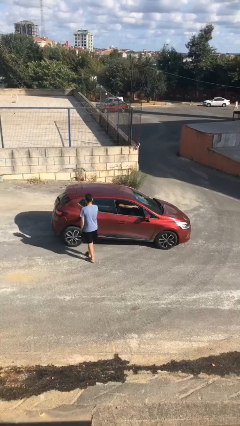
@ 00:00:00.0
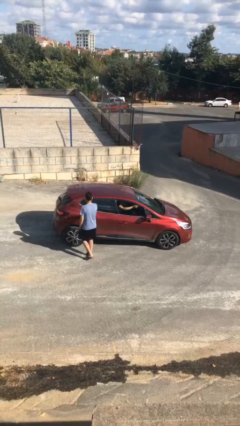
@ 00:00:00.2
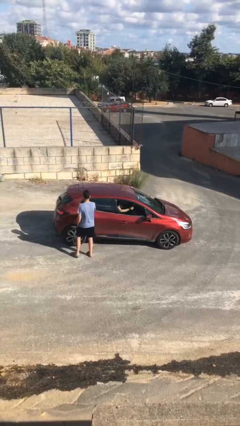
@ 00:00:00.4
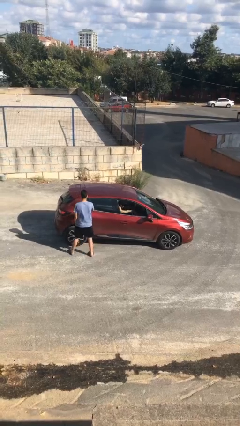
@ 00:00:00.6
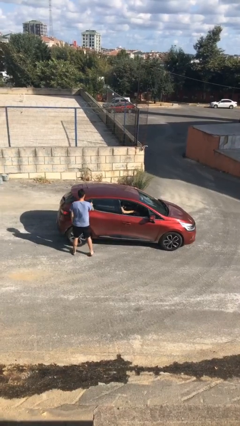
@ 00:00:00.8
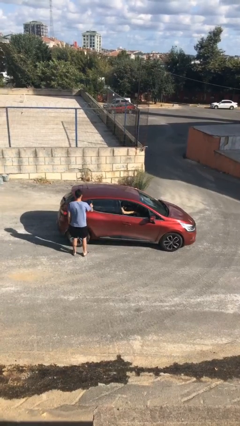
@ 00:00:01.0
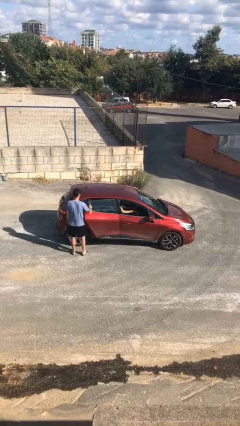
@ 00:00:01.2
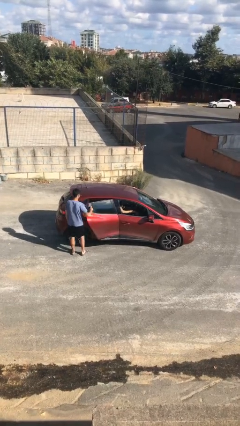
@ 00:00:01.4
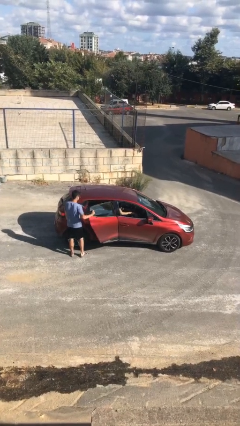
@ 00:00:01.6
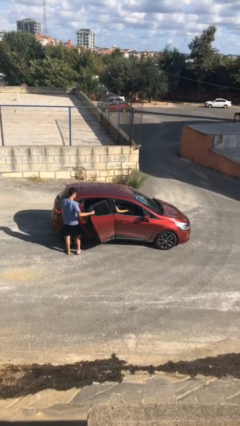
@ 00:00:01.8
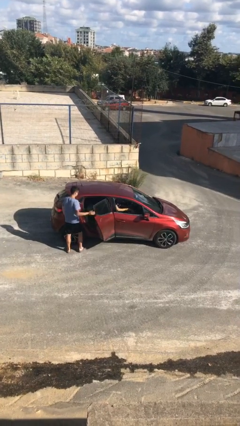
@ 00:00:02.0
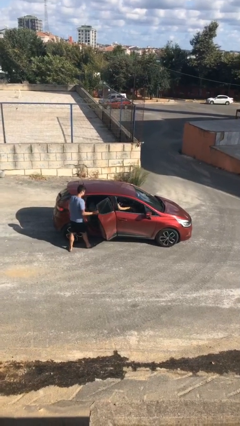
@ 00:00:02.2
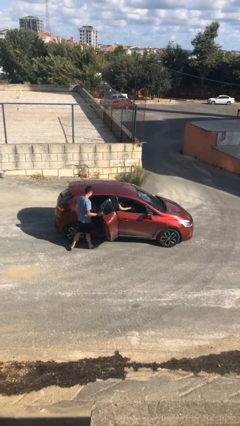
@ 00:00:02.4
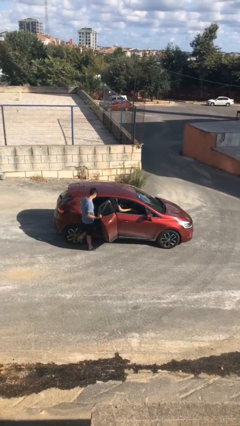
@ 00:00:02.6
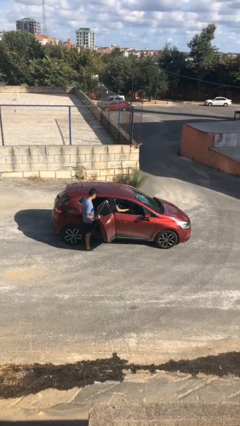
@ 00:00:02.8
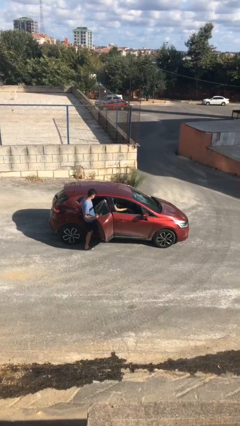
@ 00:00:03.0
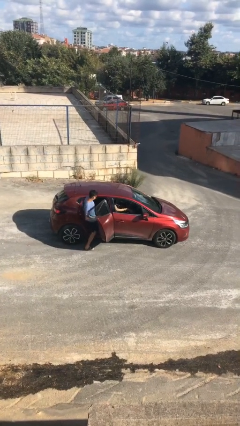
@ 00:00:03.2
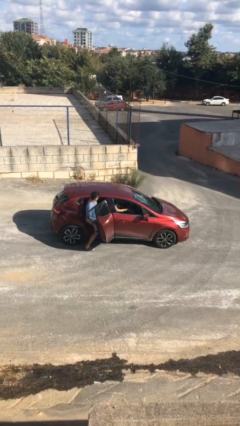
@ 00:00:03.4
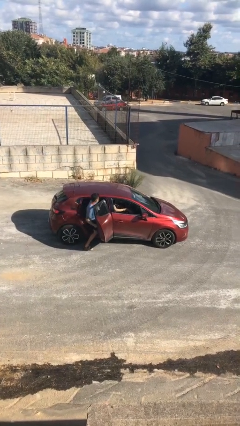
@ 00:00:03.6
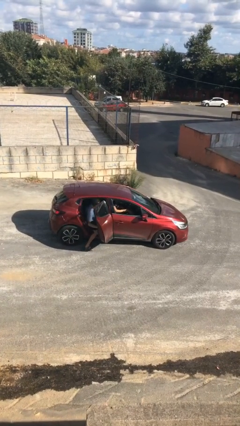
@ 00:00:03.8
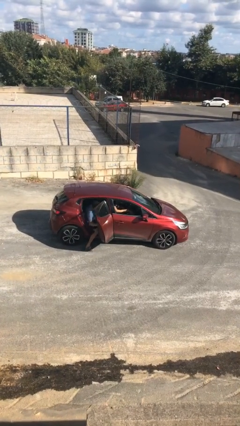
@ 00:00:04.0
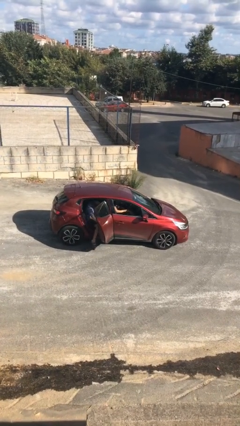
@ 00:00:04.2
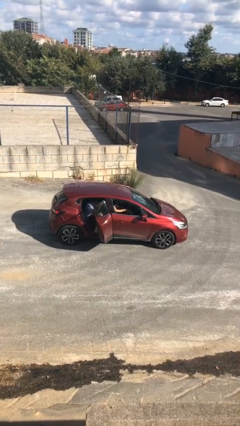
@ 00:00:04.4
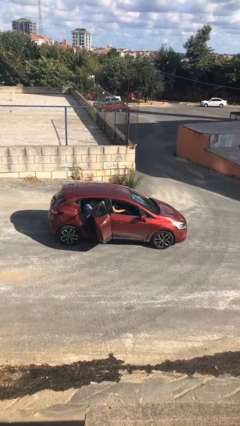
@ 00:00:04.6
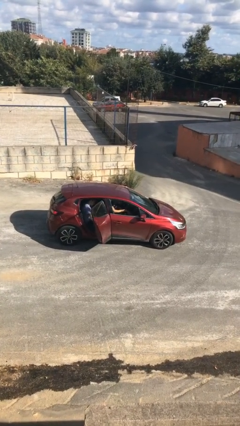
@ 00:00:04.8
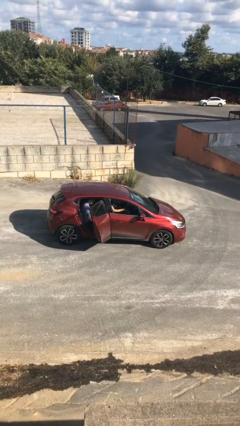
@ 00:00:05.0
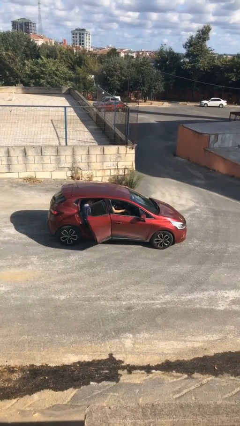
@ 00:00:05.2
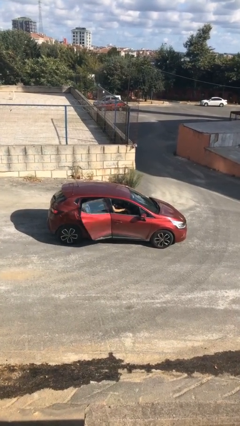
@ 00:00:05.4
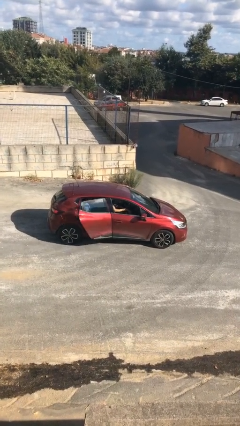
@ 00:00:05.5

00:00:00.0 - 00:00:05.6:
car picks up person

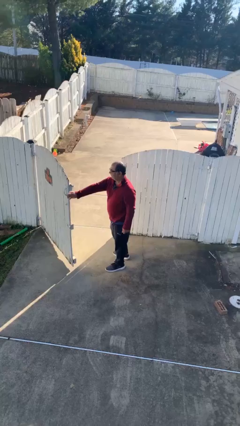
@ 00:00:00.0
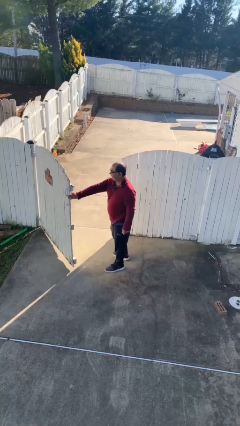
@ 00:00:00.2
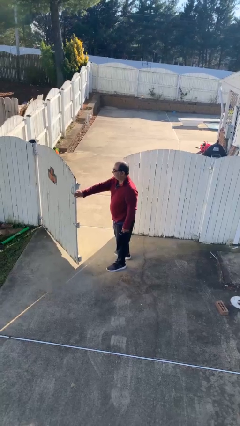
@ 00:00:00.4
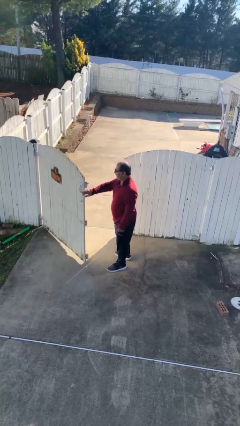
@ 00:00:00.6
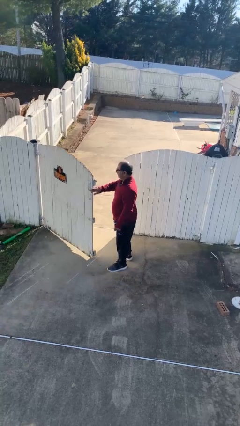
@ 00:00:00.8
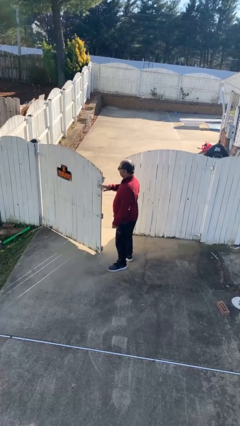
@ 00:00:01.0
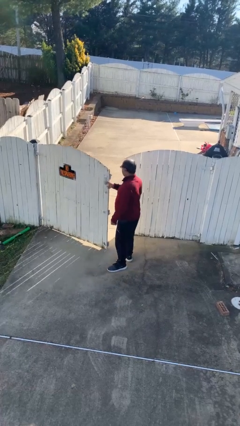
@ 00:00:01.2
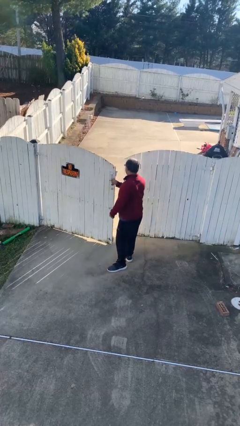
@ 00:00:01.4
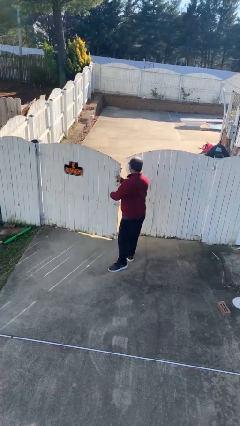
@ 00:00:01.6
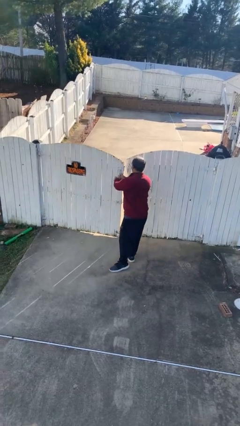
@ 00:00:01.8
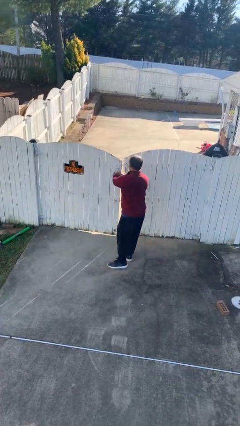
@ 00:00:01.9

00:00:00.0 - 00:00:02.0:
person closes facility door

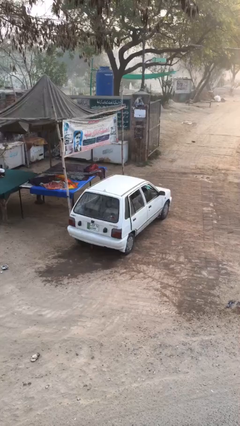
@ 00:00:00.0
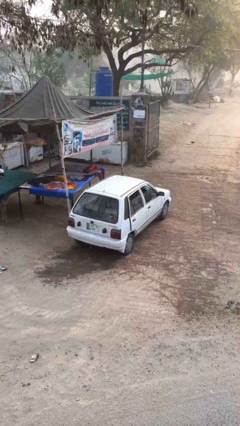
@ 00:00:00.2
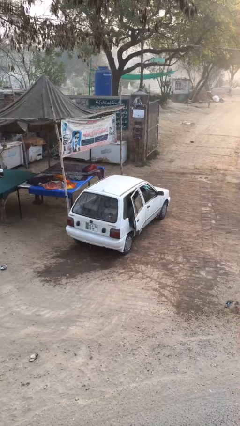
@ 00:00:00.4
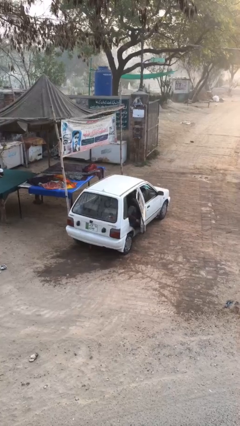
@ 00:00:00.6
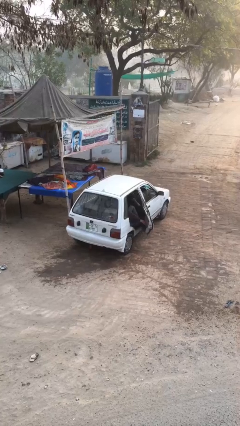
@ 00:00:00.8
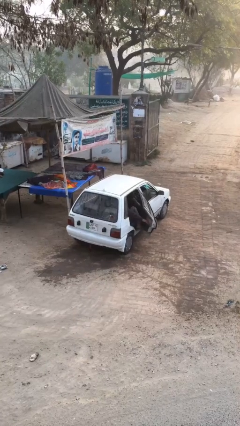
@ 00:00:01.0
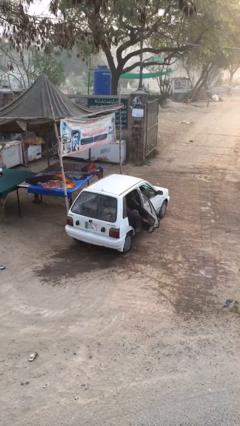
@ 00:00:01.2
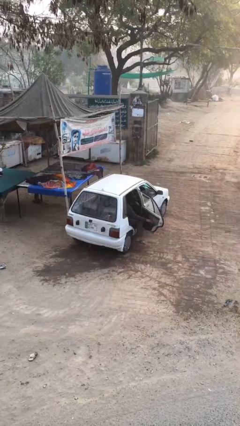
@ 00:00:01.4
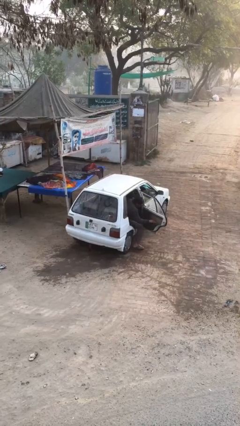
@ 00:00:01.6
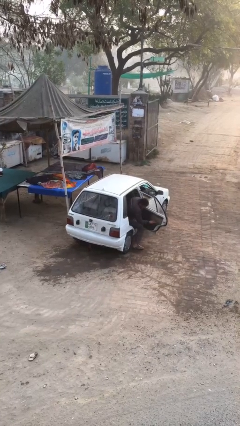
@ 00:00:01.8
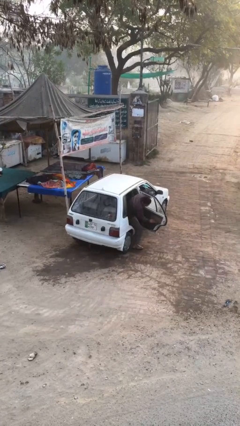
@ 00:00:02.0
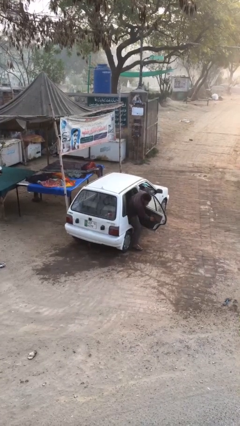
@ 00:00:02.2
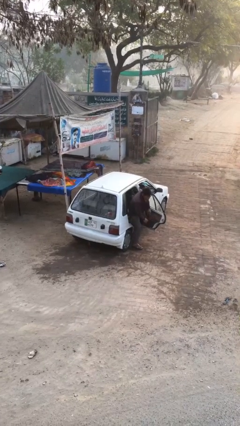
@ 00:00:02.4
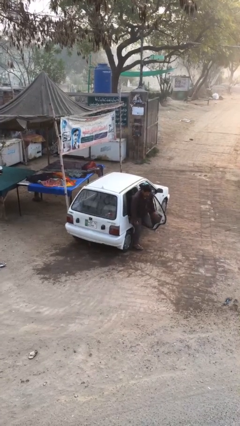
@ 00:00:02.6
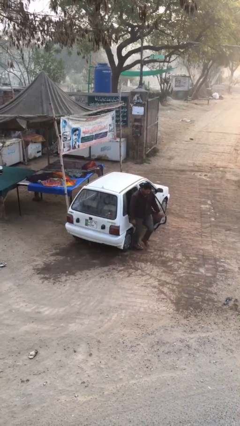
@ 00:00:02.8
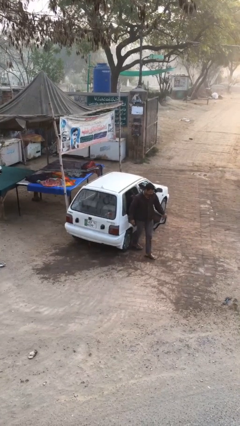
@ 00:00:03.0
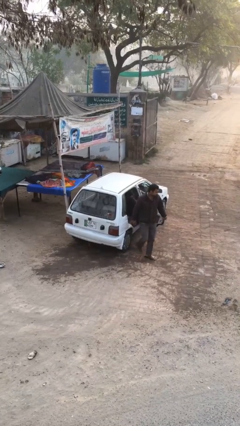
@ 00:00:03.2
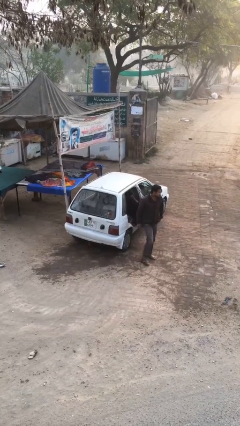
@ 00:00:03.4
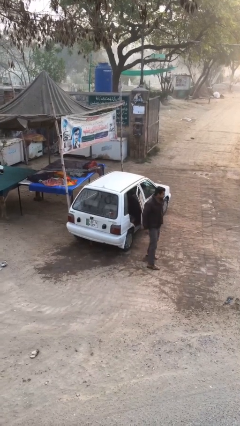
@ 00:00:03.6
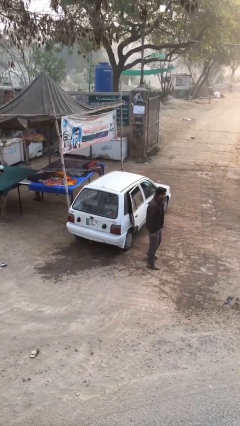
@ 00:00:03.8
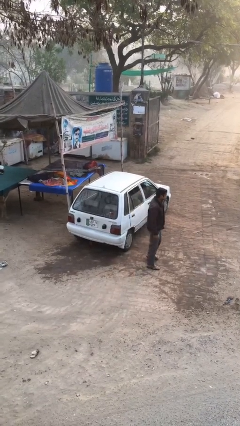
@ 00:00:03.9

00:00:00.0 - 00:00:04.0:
car drops off person

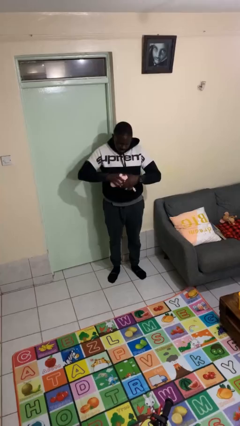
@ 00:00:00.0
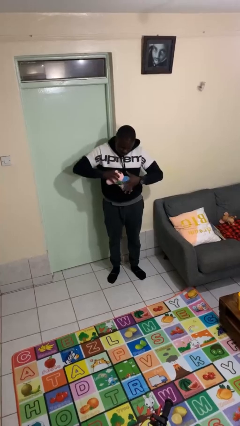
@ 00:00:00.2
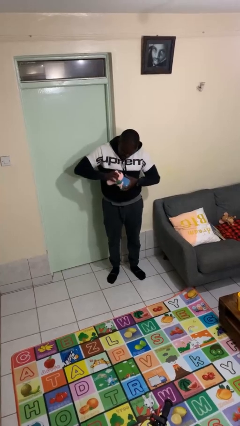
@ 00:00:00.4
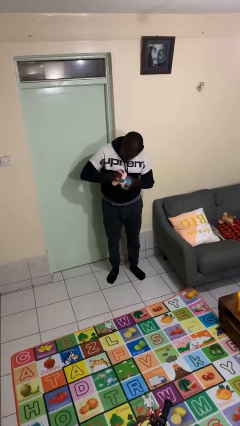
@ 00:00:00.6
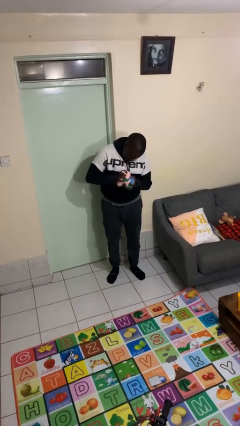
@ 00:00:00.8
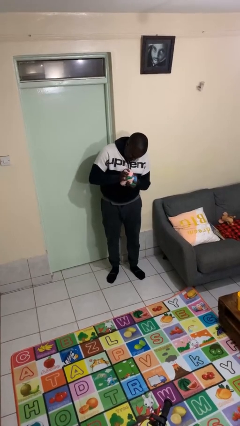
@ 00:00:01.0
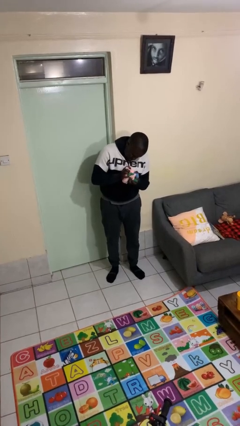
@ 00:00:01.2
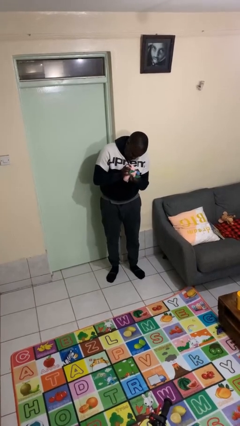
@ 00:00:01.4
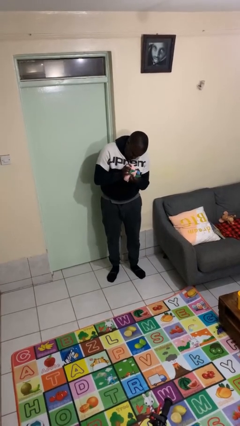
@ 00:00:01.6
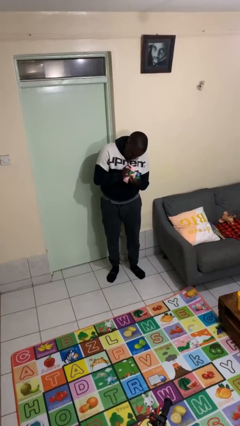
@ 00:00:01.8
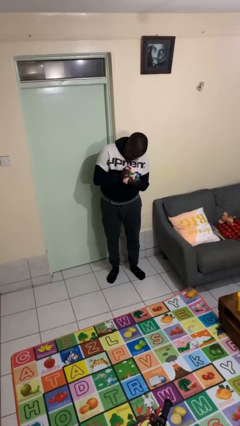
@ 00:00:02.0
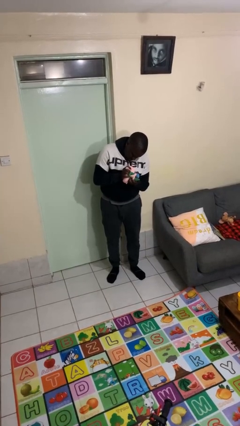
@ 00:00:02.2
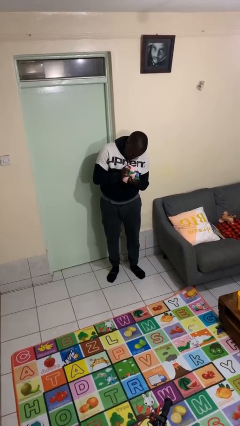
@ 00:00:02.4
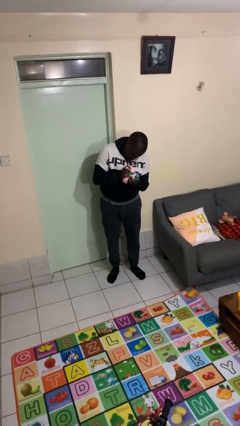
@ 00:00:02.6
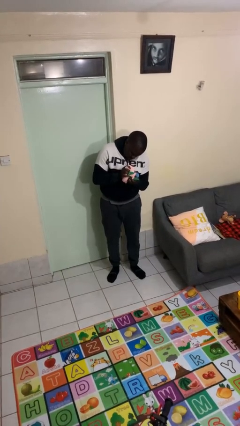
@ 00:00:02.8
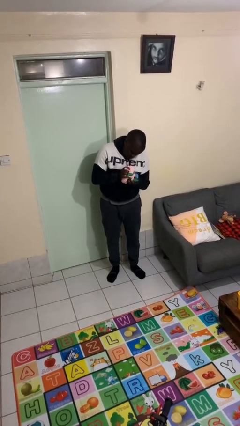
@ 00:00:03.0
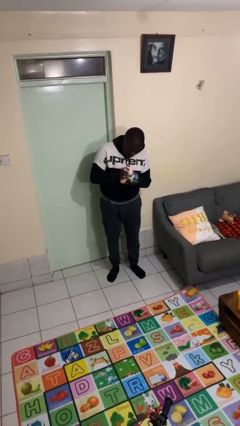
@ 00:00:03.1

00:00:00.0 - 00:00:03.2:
person squeezes object

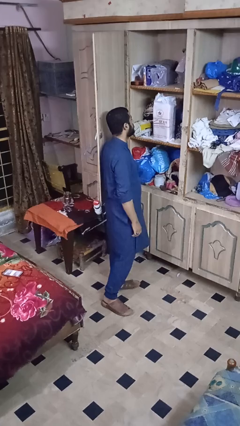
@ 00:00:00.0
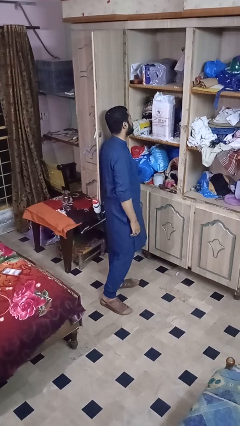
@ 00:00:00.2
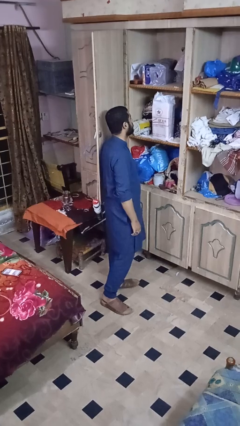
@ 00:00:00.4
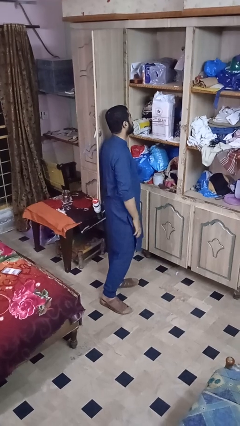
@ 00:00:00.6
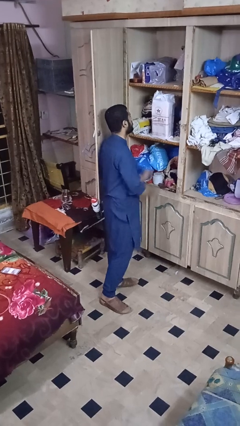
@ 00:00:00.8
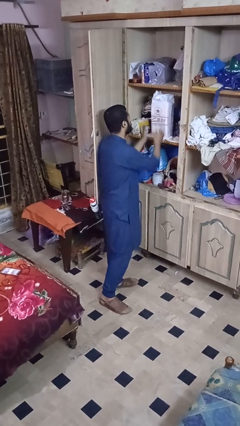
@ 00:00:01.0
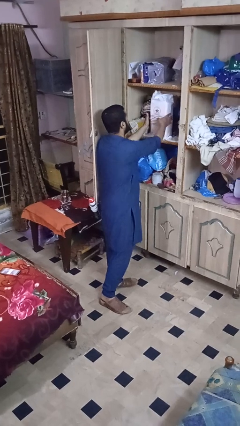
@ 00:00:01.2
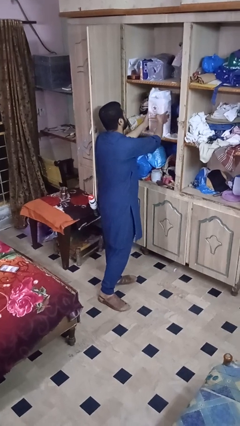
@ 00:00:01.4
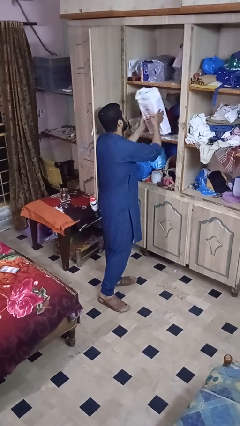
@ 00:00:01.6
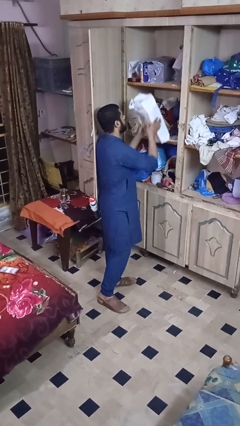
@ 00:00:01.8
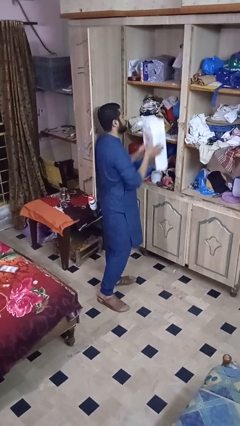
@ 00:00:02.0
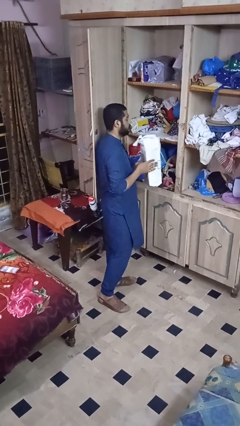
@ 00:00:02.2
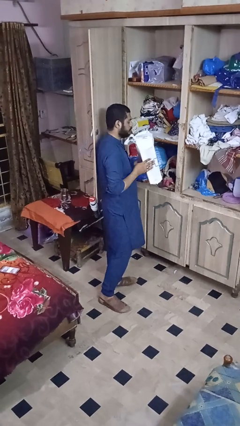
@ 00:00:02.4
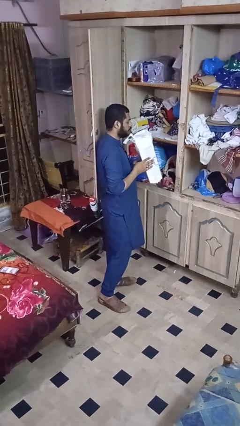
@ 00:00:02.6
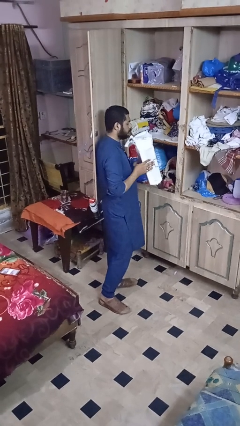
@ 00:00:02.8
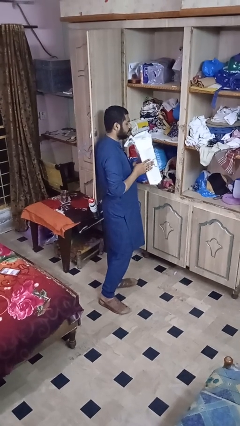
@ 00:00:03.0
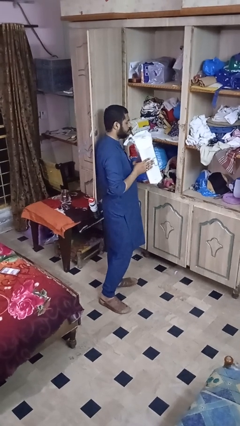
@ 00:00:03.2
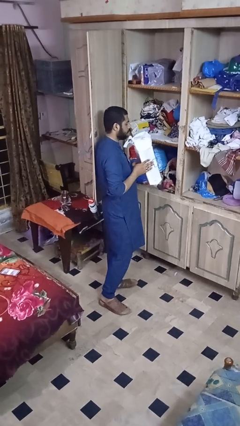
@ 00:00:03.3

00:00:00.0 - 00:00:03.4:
person picks up object from cabinet
